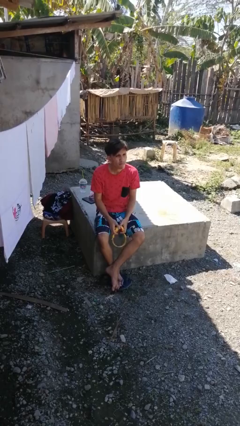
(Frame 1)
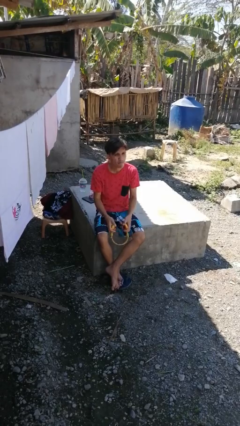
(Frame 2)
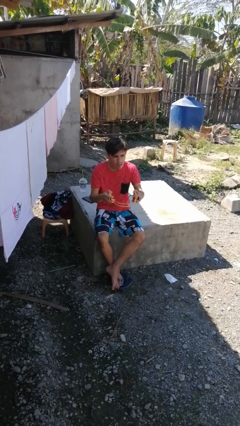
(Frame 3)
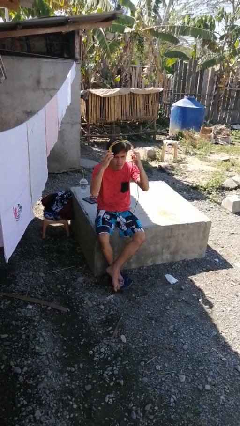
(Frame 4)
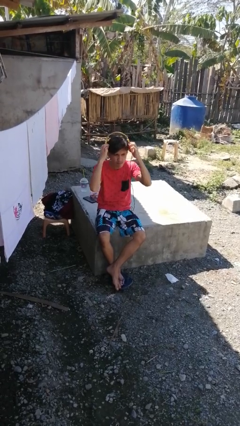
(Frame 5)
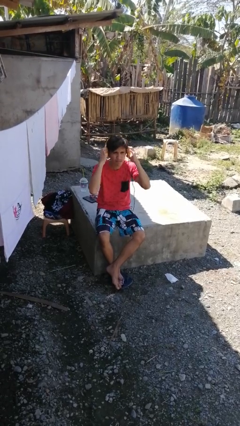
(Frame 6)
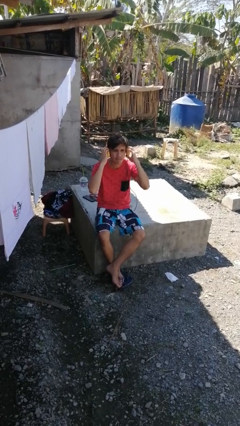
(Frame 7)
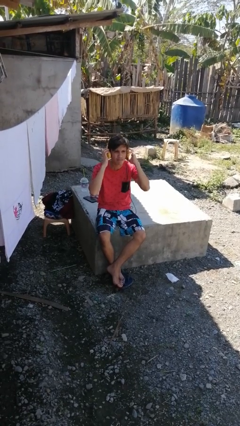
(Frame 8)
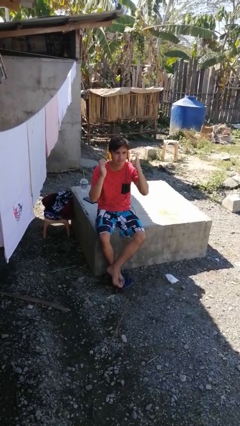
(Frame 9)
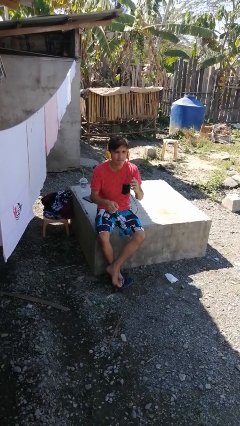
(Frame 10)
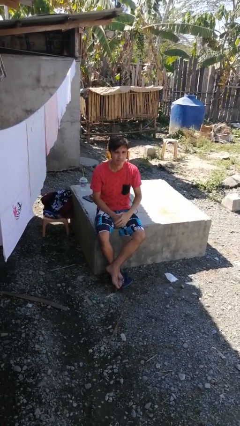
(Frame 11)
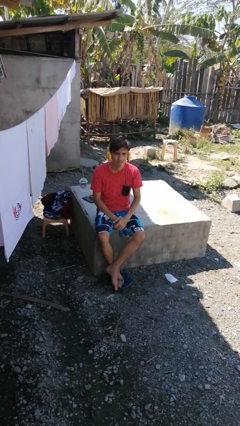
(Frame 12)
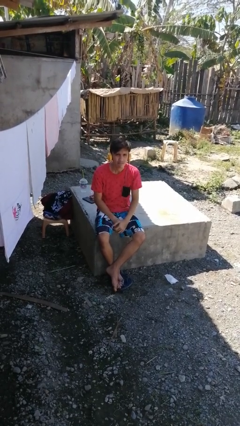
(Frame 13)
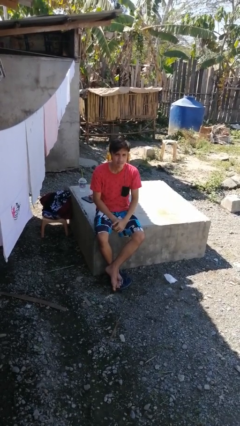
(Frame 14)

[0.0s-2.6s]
person puts on headphones

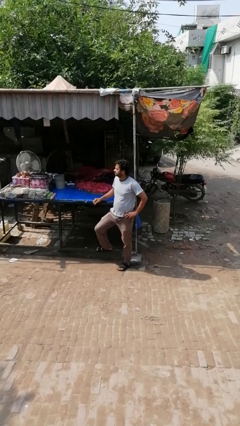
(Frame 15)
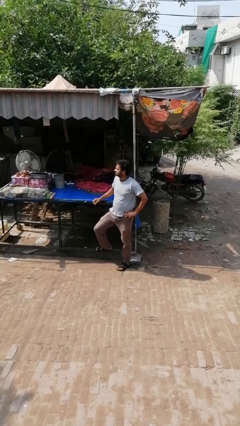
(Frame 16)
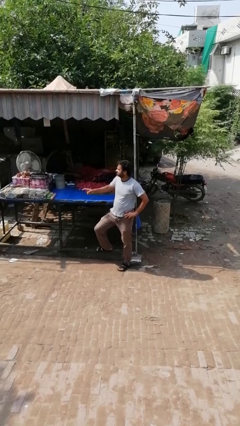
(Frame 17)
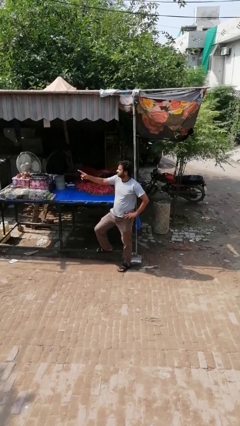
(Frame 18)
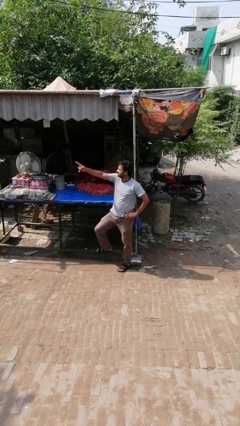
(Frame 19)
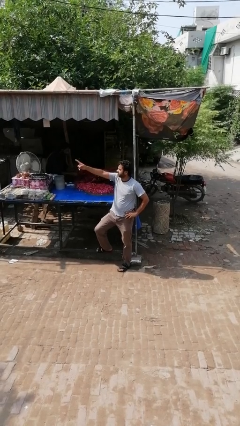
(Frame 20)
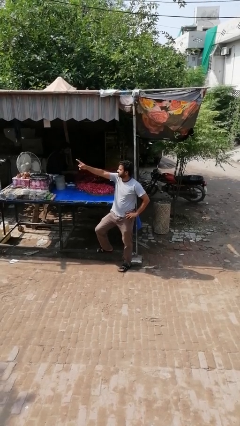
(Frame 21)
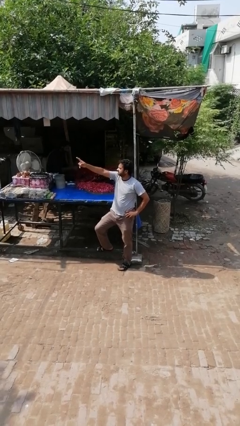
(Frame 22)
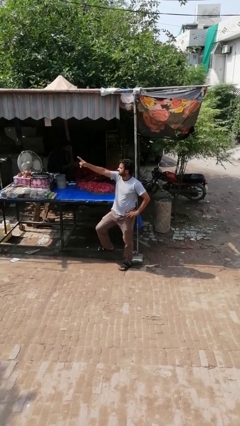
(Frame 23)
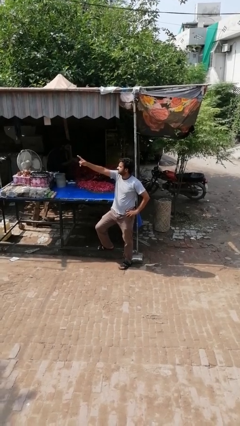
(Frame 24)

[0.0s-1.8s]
person points at person

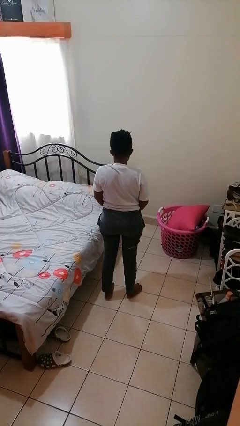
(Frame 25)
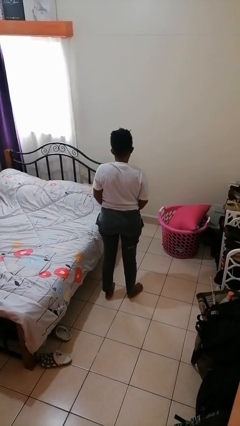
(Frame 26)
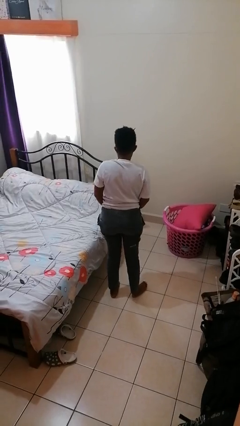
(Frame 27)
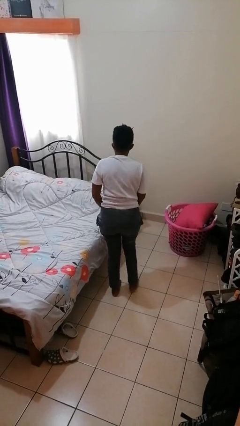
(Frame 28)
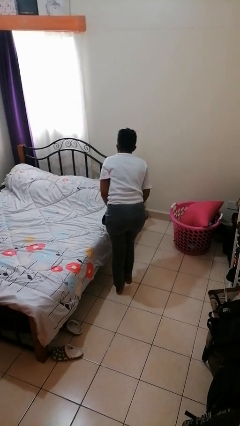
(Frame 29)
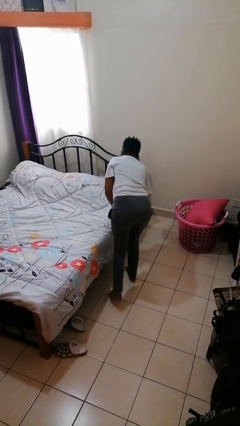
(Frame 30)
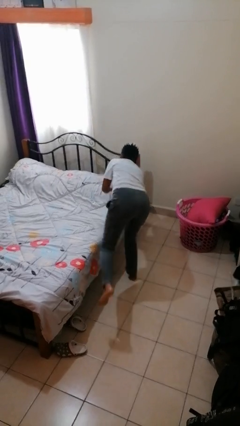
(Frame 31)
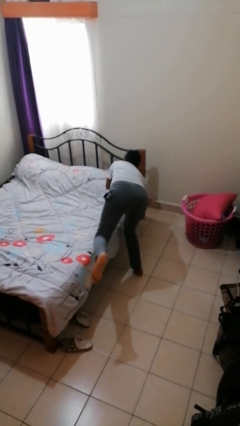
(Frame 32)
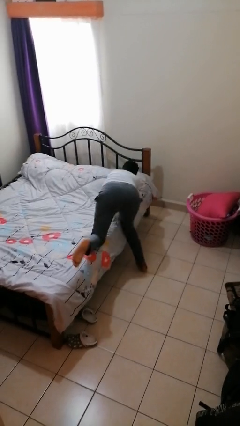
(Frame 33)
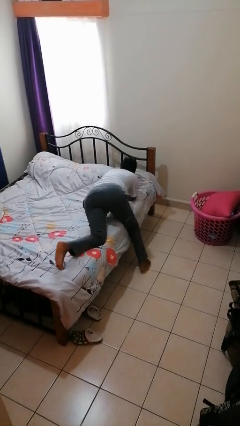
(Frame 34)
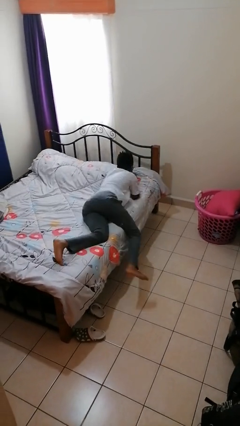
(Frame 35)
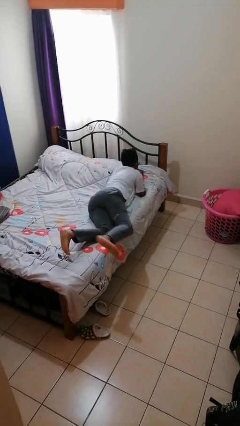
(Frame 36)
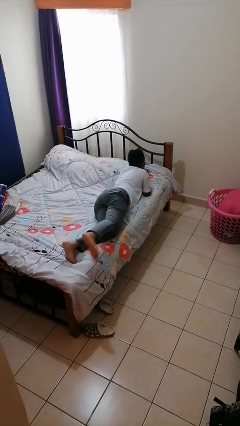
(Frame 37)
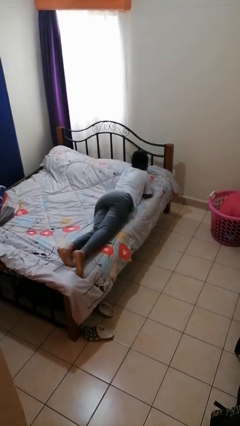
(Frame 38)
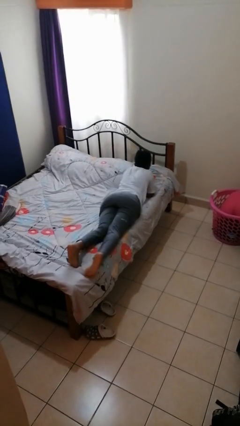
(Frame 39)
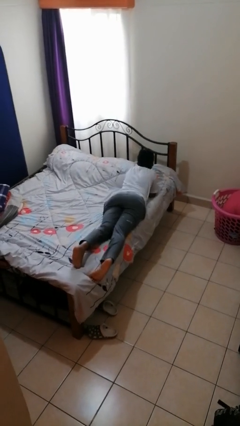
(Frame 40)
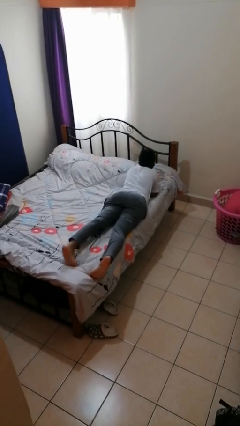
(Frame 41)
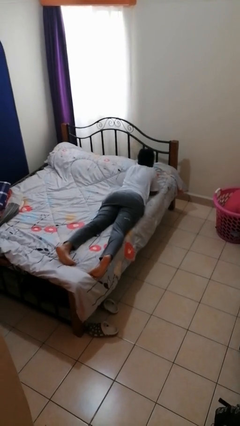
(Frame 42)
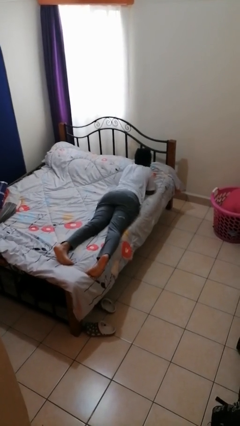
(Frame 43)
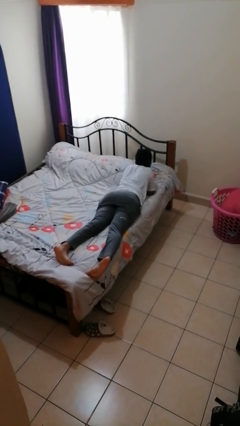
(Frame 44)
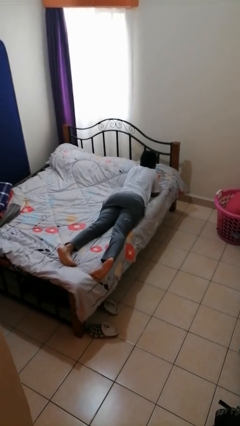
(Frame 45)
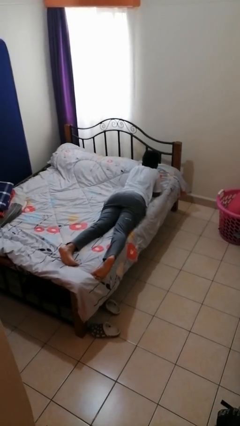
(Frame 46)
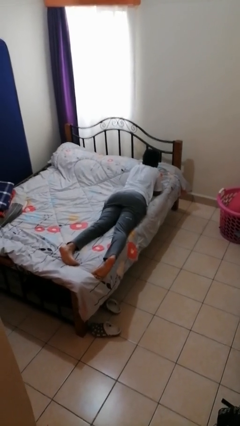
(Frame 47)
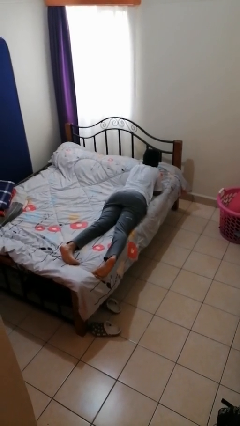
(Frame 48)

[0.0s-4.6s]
person lies down on bed

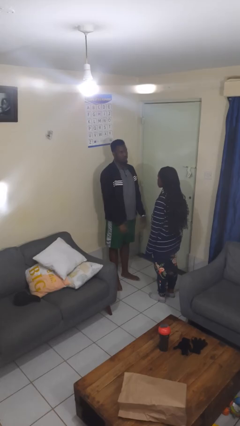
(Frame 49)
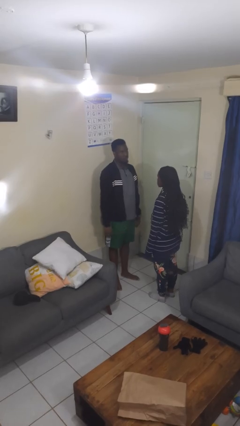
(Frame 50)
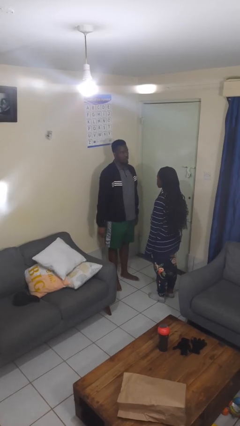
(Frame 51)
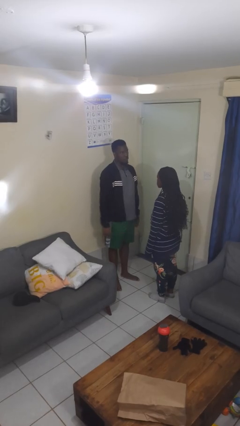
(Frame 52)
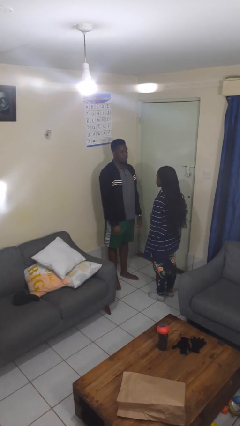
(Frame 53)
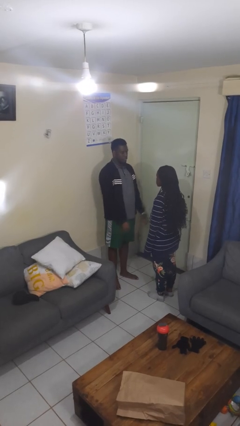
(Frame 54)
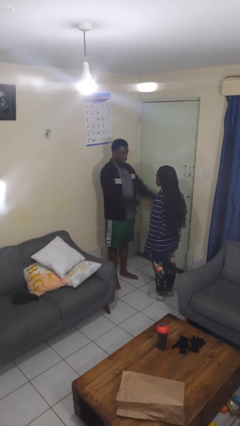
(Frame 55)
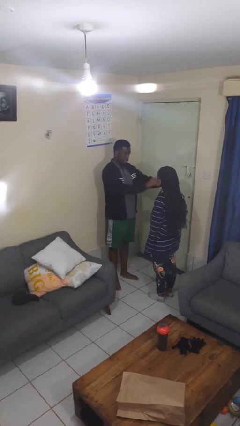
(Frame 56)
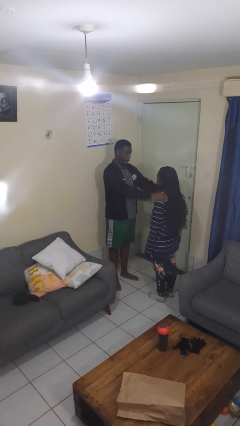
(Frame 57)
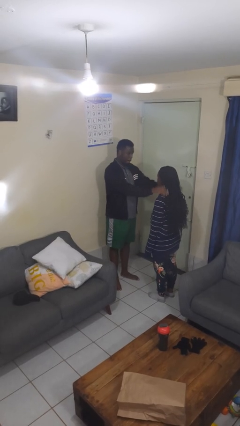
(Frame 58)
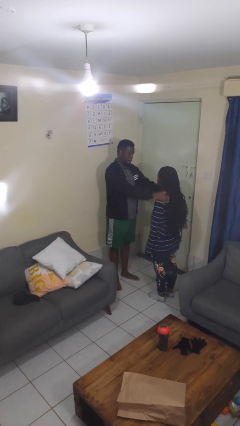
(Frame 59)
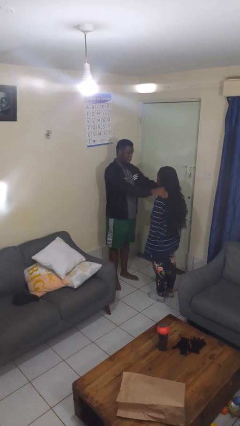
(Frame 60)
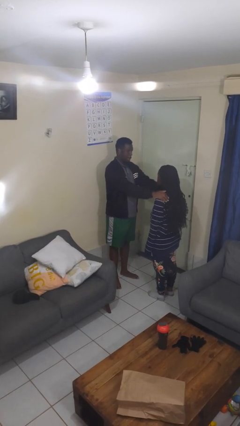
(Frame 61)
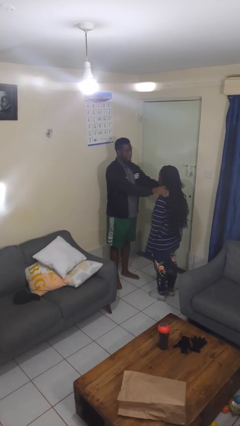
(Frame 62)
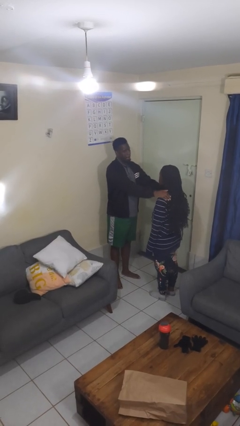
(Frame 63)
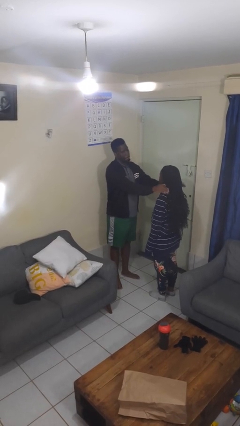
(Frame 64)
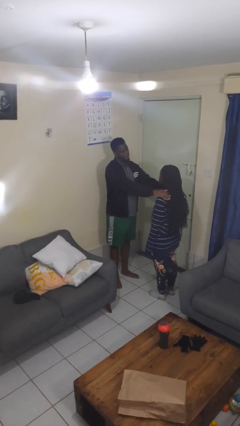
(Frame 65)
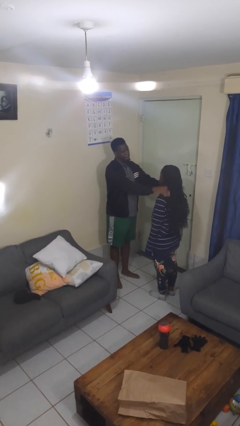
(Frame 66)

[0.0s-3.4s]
person pounds shoulders of person

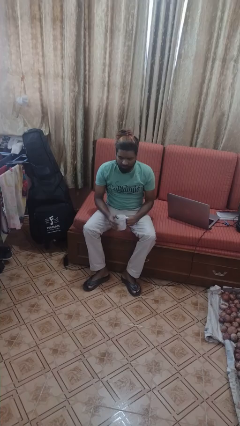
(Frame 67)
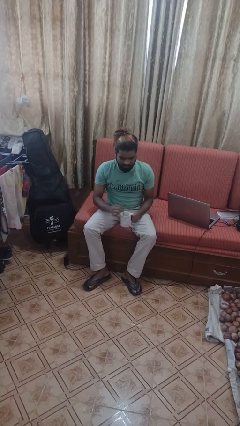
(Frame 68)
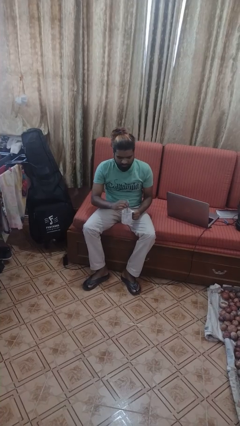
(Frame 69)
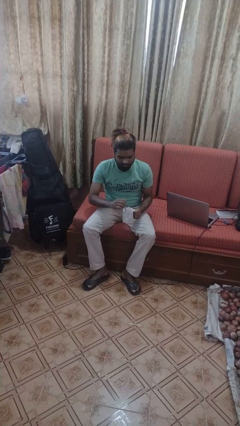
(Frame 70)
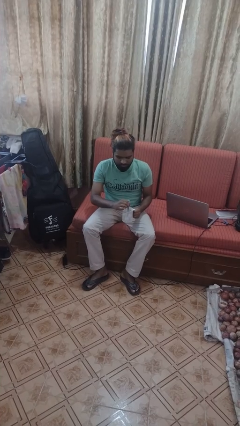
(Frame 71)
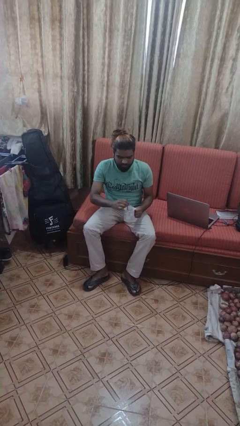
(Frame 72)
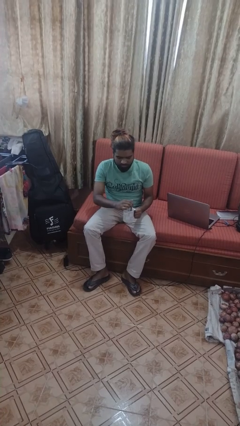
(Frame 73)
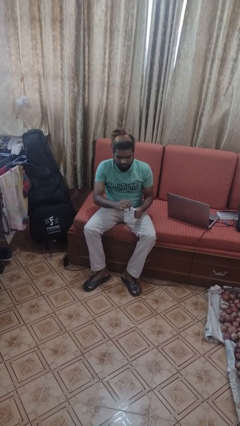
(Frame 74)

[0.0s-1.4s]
person stirs mug

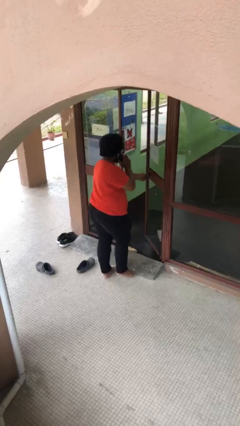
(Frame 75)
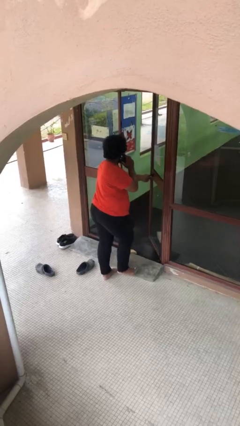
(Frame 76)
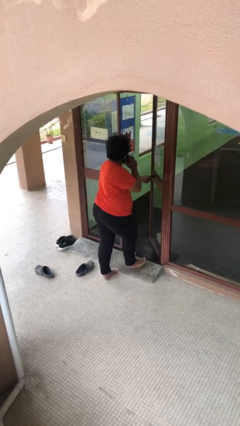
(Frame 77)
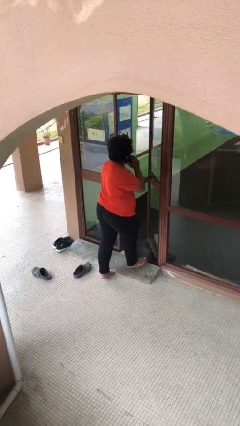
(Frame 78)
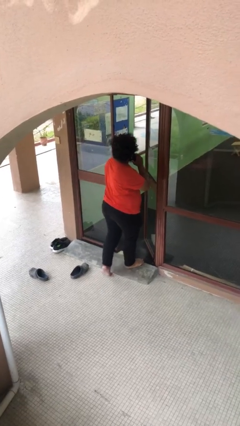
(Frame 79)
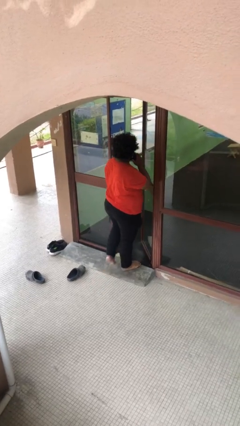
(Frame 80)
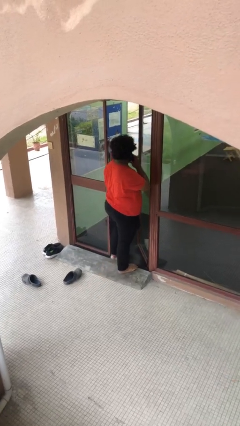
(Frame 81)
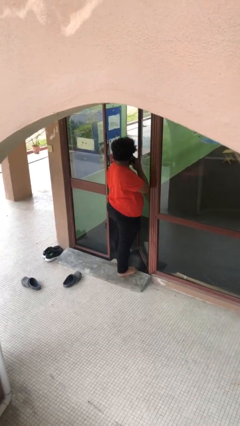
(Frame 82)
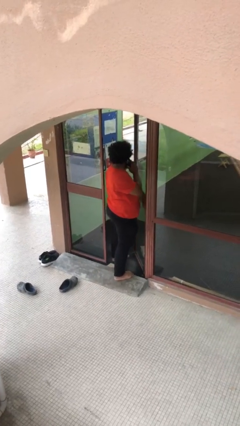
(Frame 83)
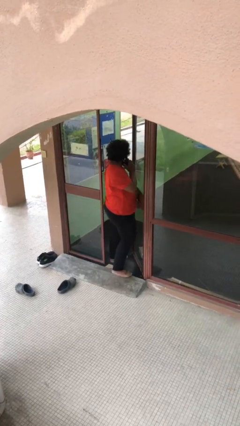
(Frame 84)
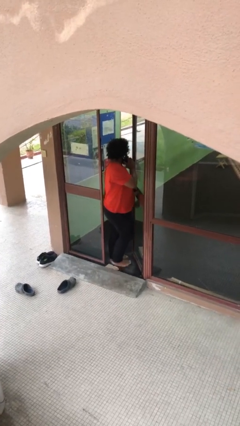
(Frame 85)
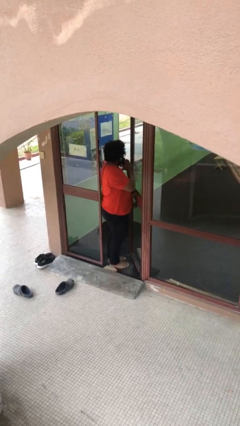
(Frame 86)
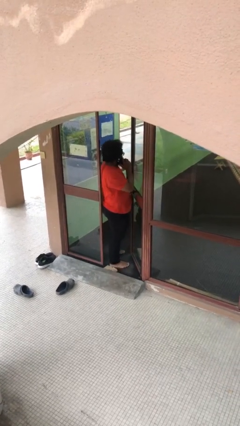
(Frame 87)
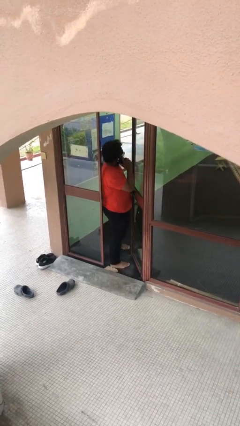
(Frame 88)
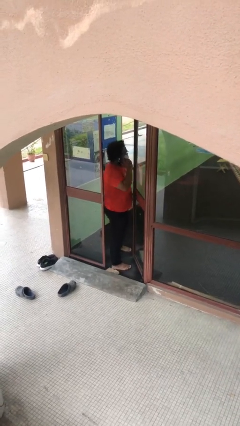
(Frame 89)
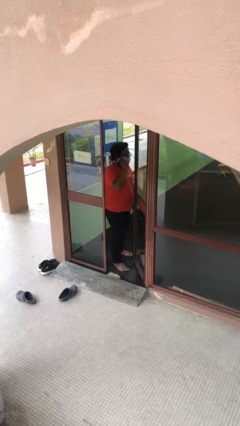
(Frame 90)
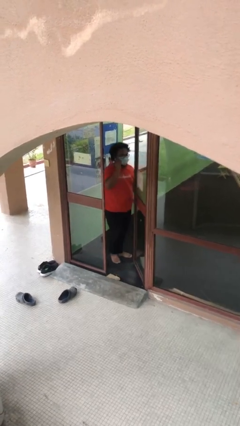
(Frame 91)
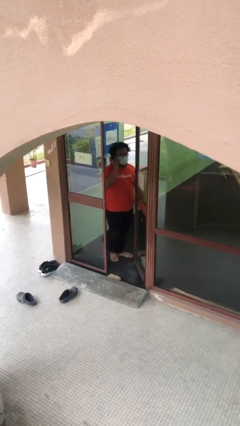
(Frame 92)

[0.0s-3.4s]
person exits scene through structure
